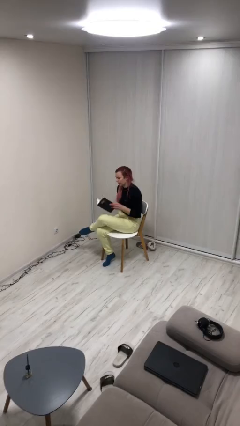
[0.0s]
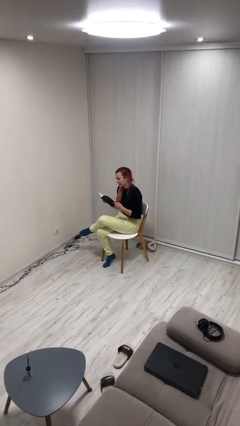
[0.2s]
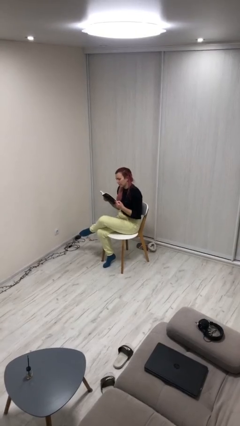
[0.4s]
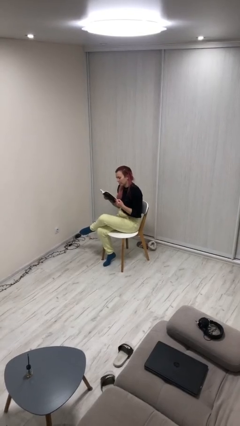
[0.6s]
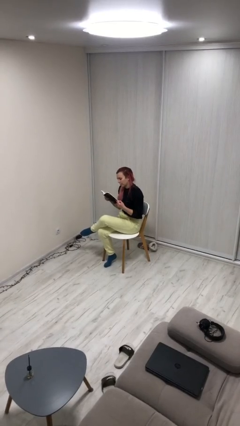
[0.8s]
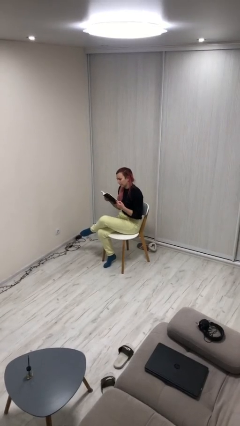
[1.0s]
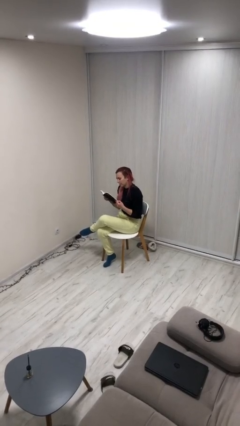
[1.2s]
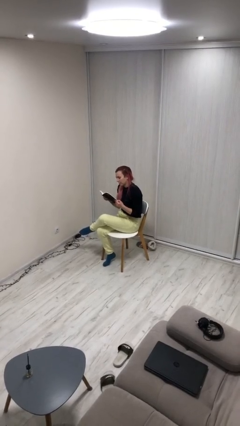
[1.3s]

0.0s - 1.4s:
person reads document

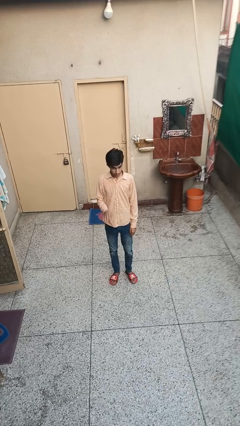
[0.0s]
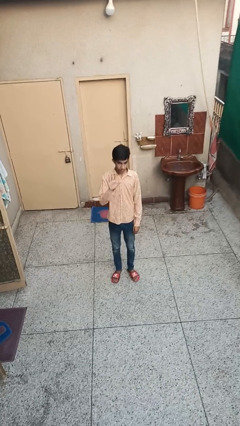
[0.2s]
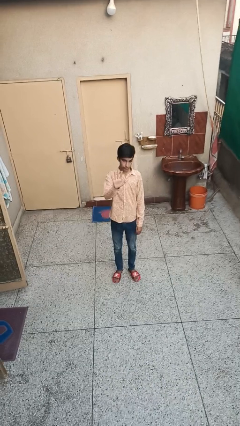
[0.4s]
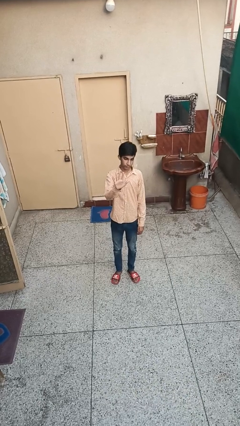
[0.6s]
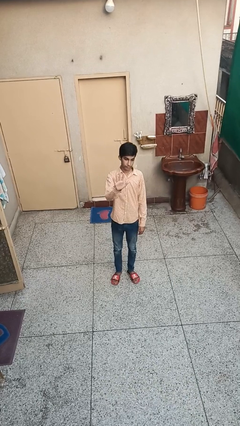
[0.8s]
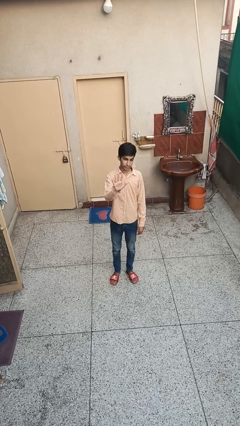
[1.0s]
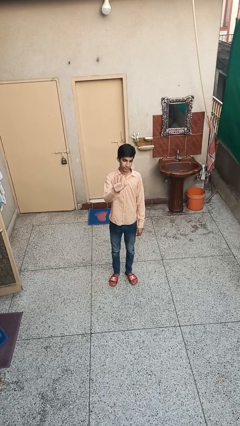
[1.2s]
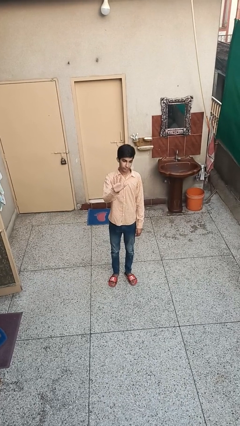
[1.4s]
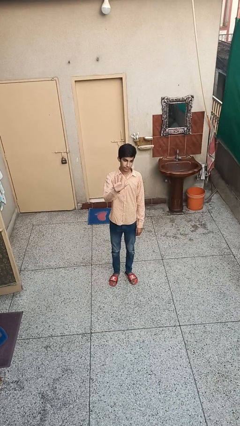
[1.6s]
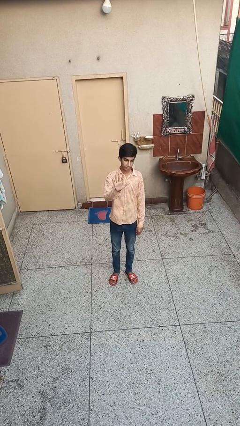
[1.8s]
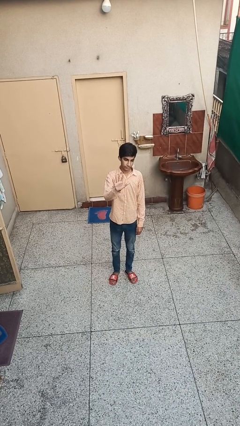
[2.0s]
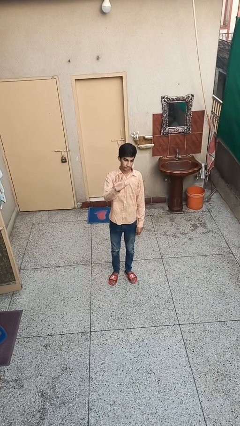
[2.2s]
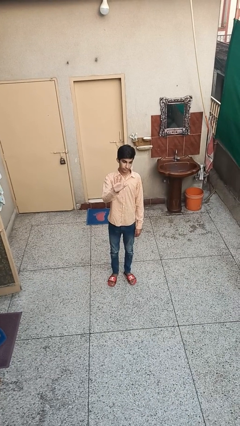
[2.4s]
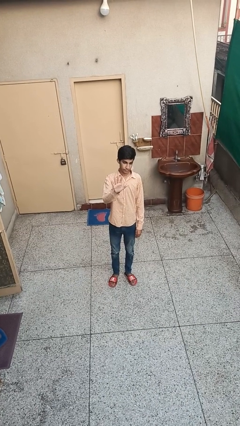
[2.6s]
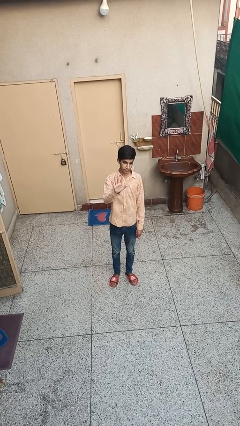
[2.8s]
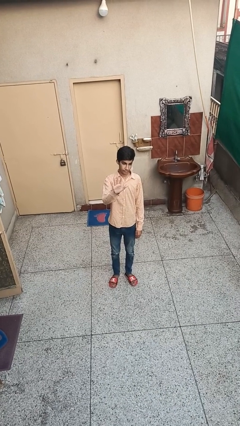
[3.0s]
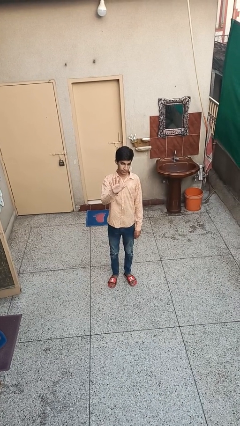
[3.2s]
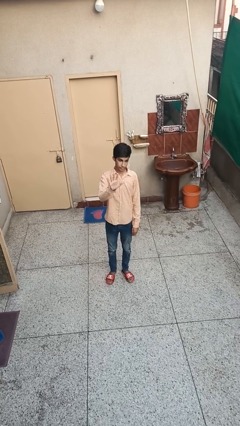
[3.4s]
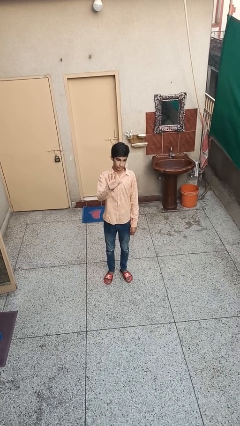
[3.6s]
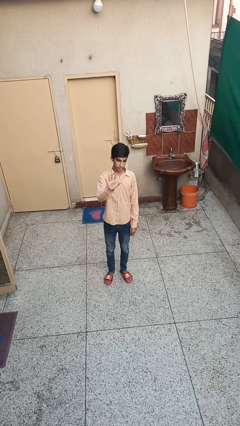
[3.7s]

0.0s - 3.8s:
person gestures number five

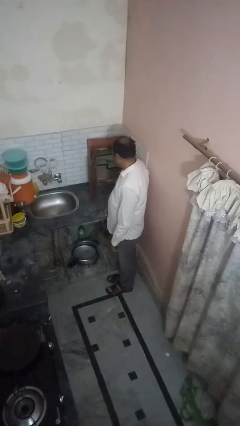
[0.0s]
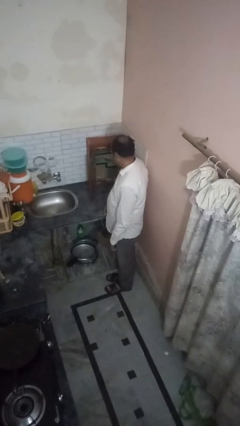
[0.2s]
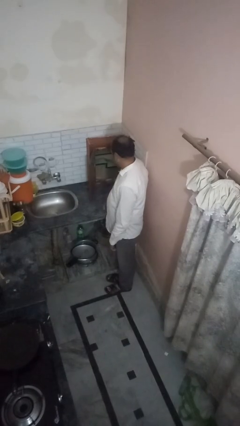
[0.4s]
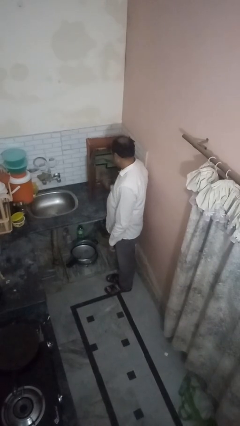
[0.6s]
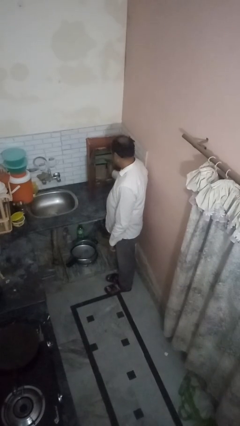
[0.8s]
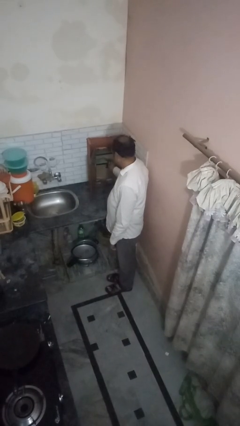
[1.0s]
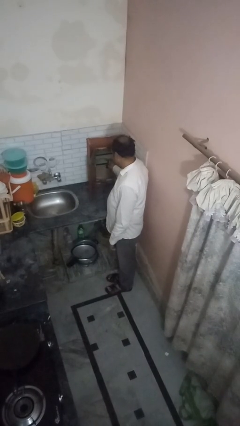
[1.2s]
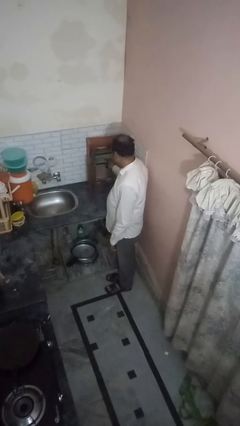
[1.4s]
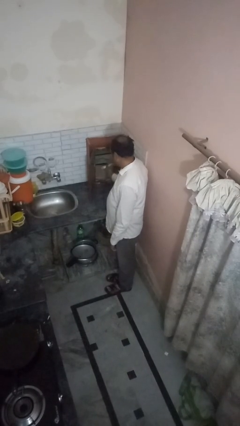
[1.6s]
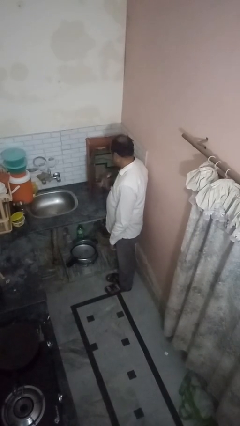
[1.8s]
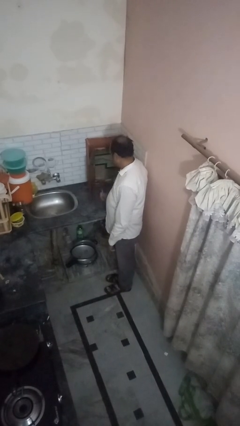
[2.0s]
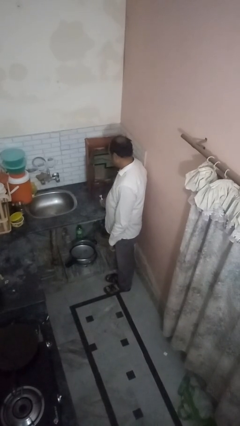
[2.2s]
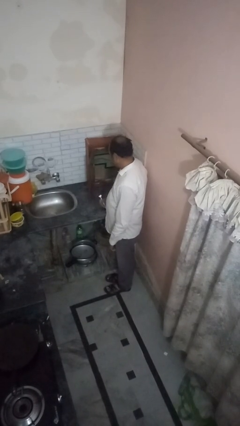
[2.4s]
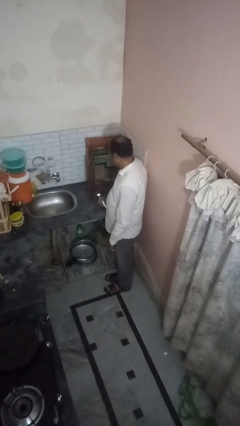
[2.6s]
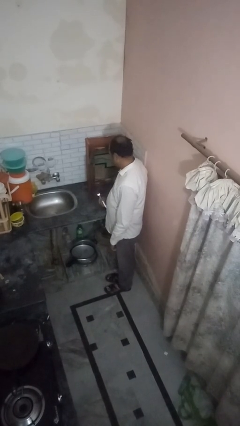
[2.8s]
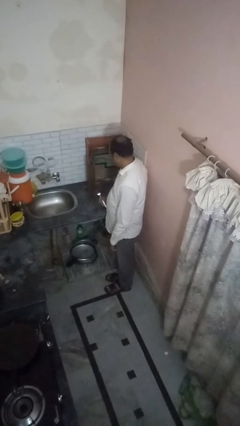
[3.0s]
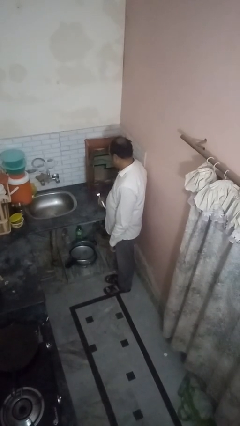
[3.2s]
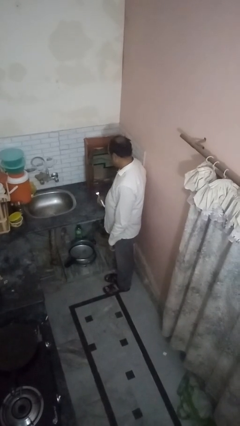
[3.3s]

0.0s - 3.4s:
person takes object from kitchen drawer

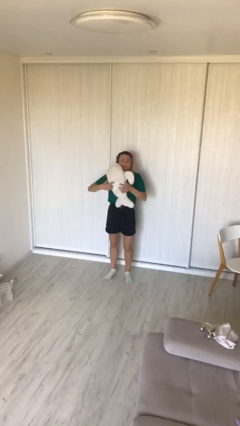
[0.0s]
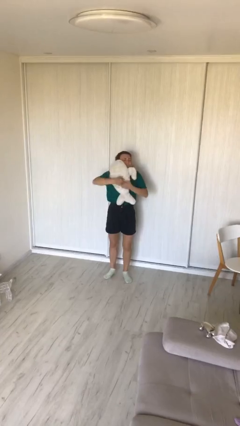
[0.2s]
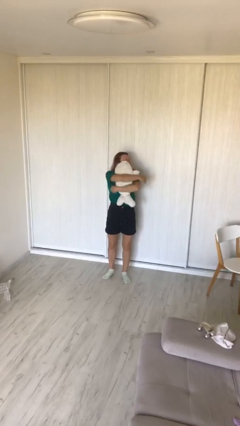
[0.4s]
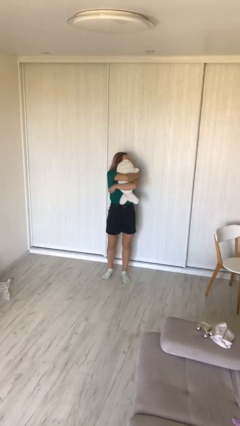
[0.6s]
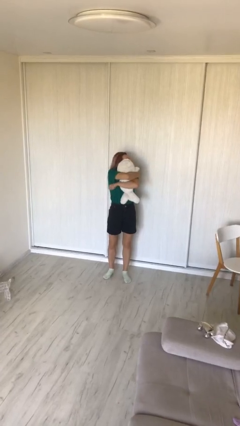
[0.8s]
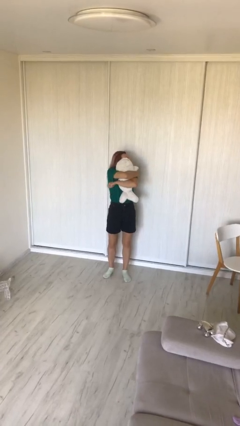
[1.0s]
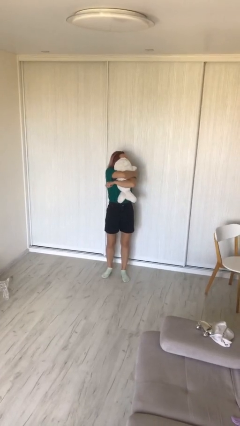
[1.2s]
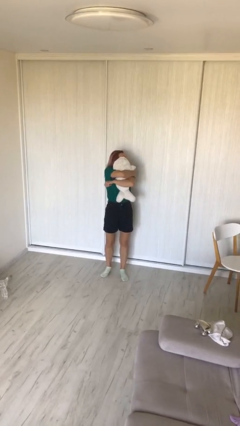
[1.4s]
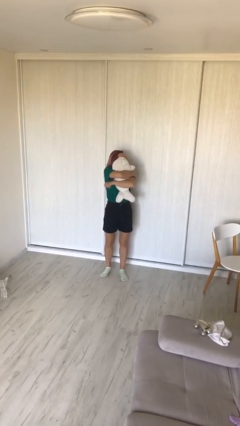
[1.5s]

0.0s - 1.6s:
person hugs stuffed animal

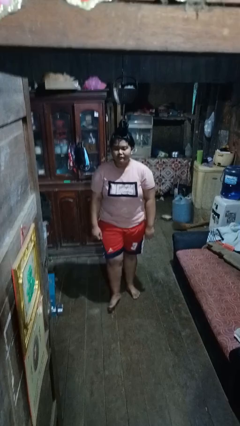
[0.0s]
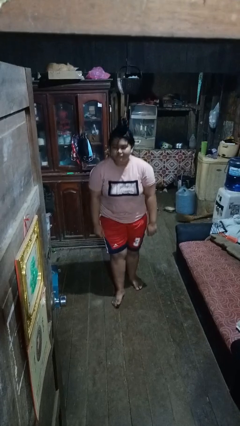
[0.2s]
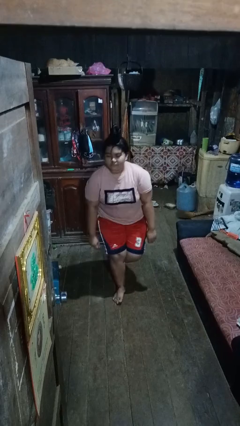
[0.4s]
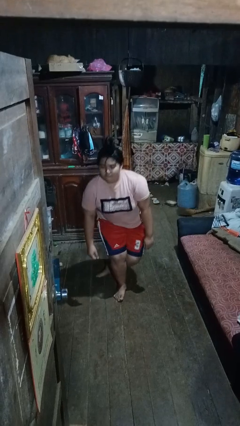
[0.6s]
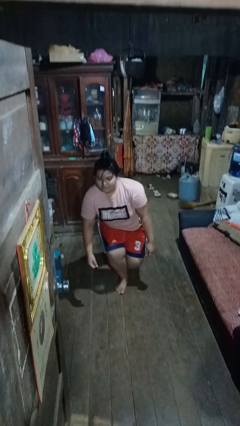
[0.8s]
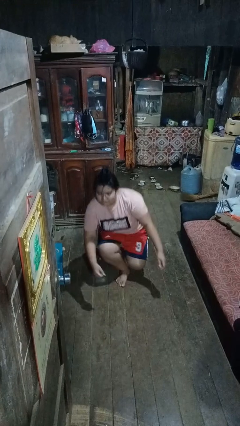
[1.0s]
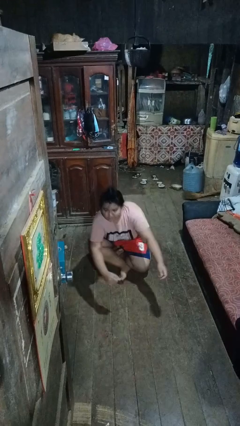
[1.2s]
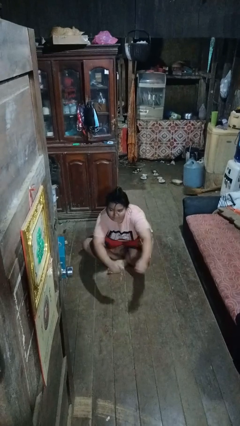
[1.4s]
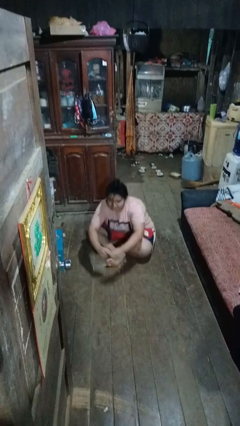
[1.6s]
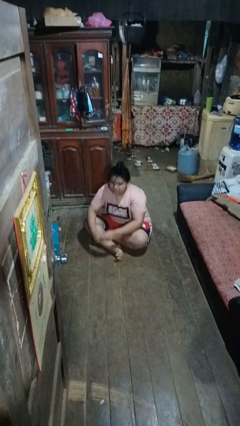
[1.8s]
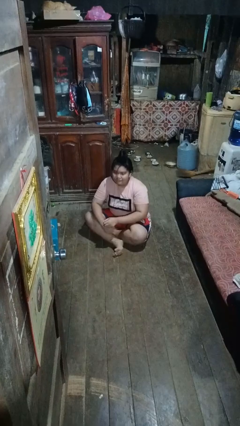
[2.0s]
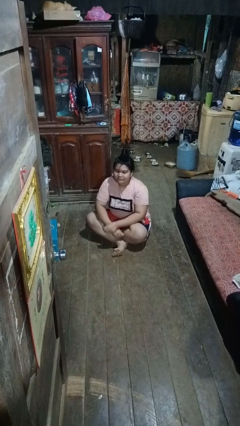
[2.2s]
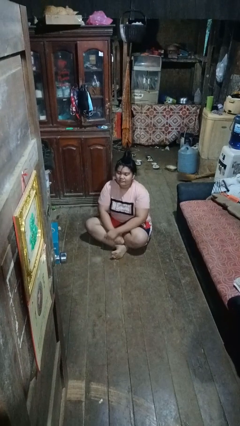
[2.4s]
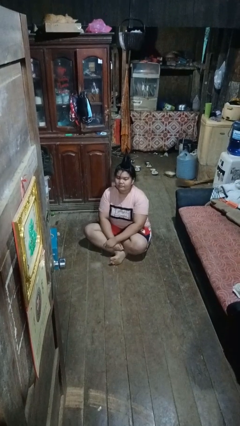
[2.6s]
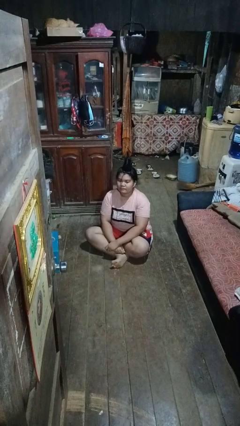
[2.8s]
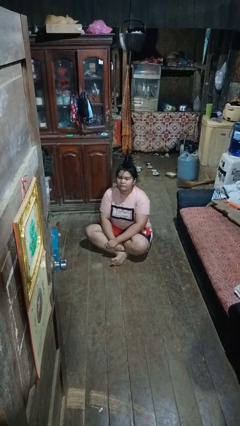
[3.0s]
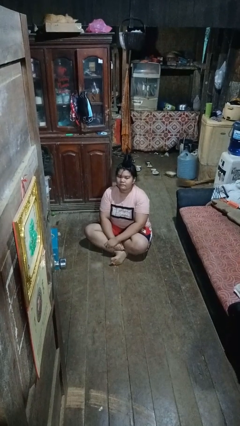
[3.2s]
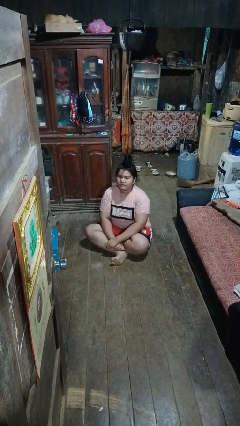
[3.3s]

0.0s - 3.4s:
person sits crisscross

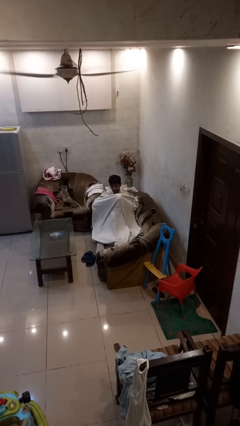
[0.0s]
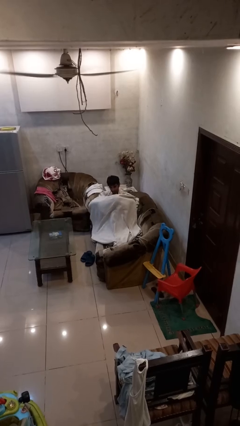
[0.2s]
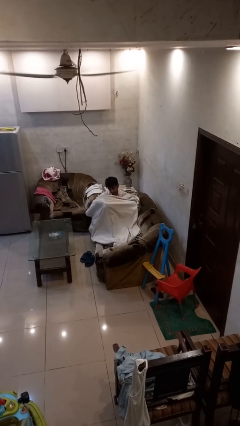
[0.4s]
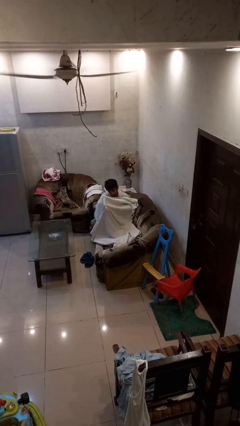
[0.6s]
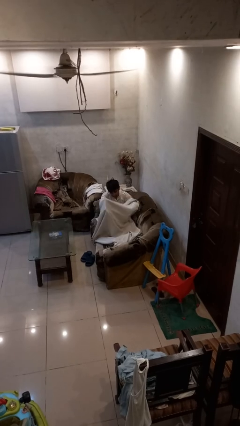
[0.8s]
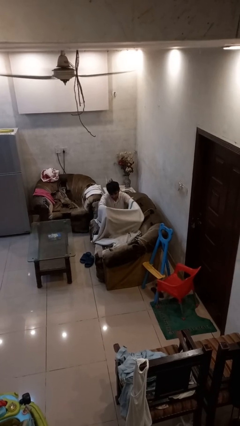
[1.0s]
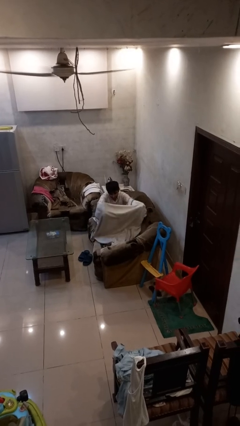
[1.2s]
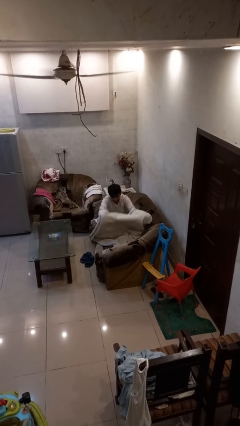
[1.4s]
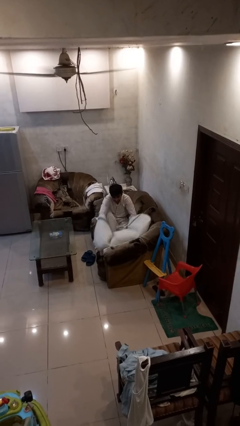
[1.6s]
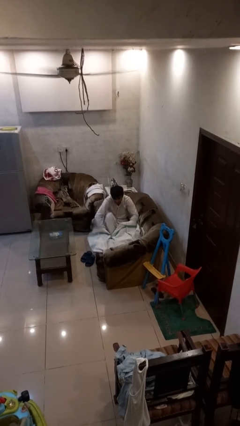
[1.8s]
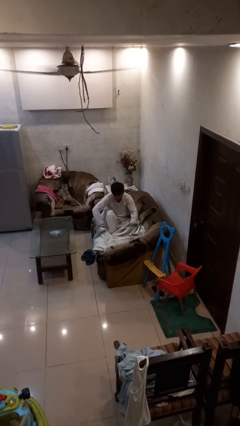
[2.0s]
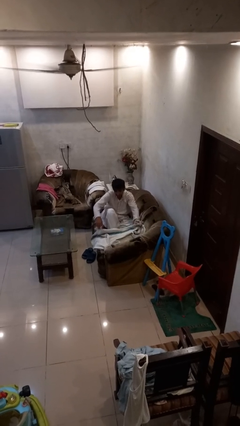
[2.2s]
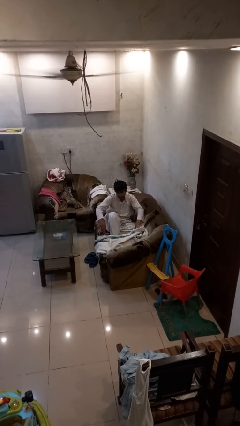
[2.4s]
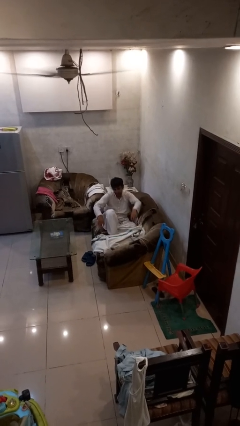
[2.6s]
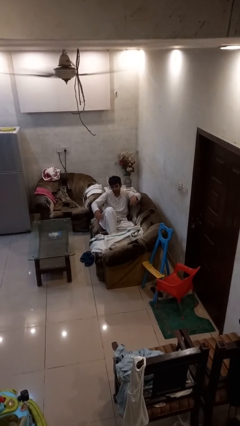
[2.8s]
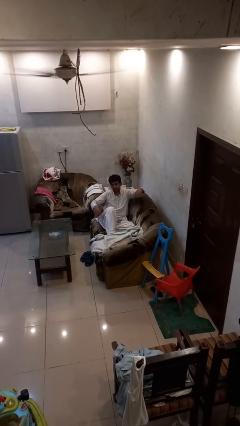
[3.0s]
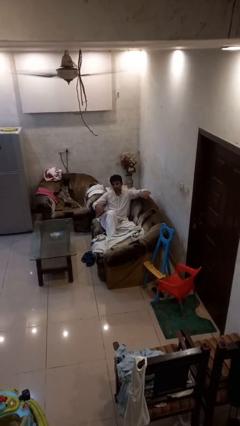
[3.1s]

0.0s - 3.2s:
person uncovers with blanket

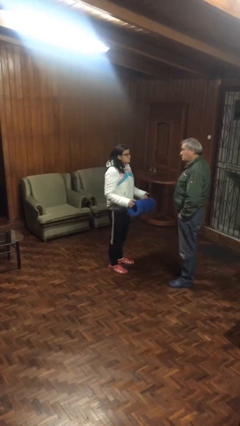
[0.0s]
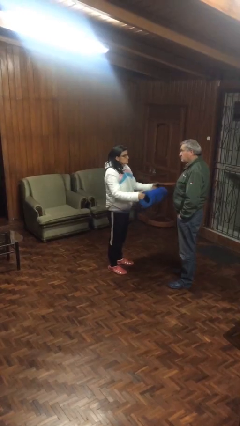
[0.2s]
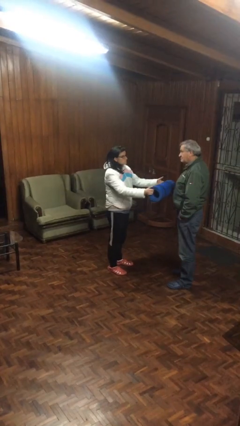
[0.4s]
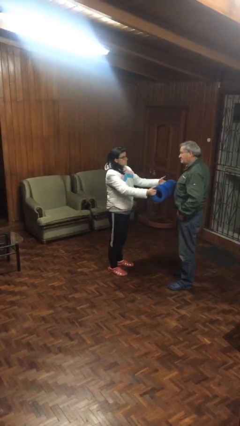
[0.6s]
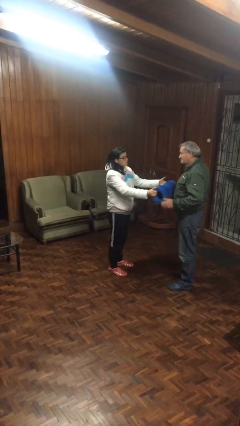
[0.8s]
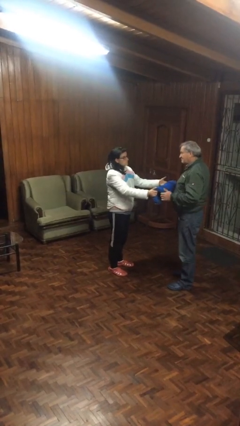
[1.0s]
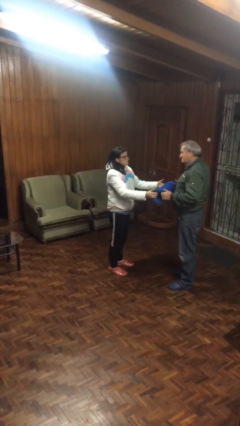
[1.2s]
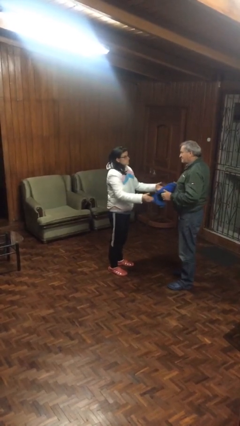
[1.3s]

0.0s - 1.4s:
person transfers object to person
